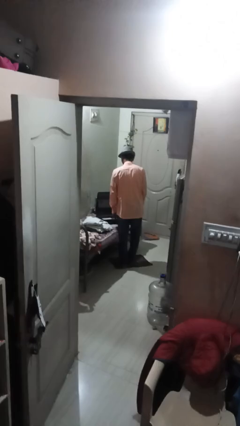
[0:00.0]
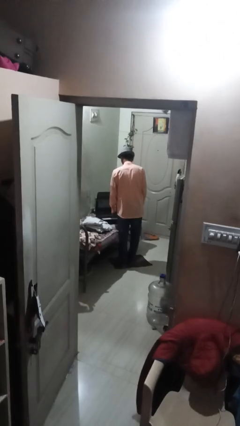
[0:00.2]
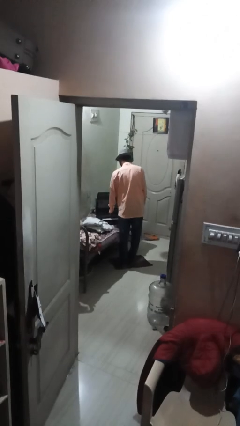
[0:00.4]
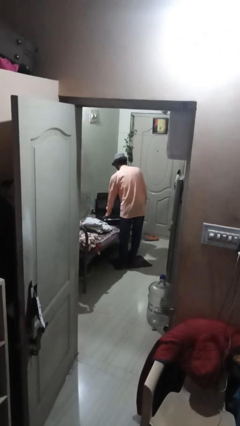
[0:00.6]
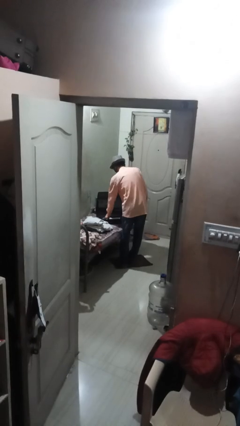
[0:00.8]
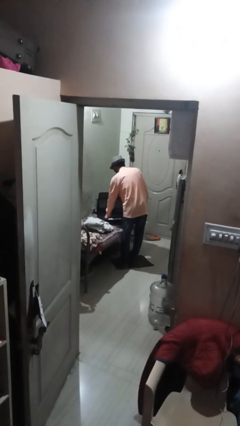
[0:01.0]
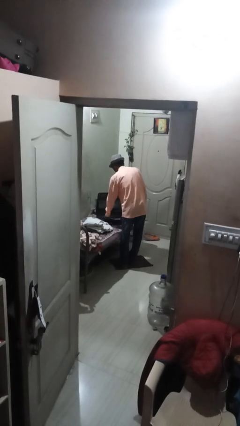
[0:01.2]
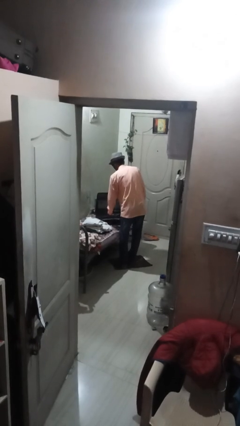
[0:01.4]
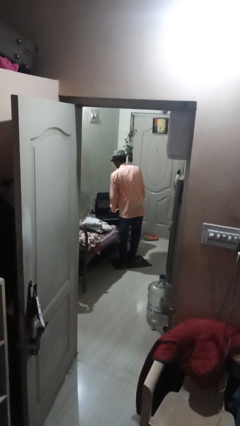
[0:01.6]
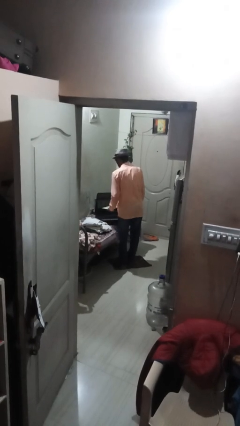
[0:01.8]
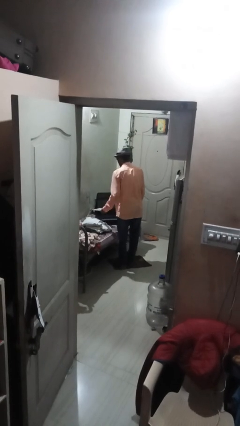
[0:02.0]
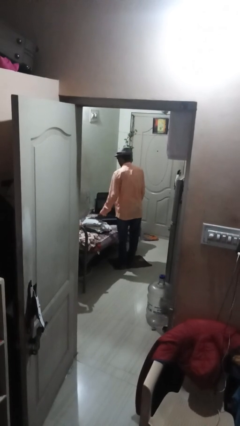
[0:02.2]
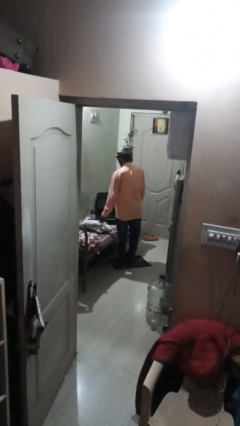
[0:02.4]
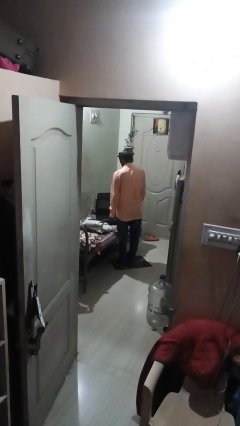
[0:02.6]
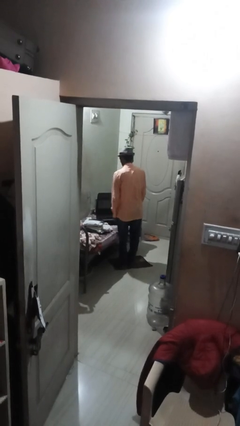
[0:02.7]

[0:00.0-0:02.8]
person unloads clothes from suitcase

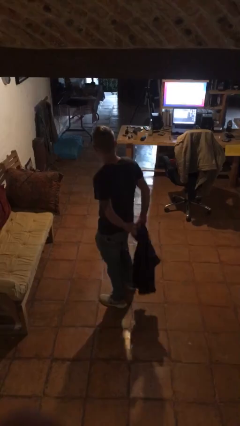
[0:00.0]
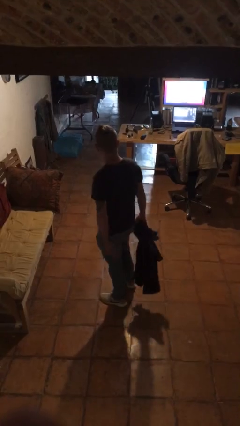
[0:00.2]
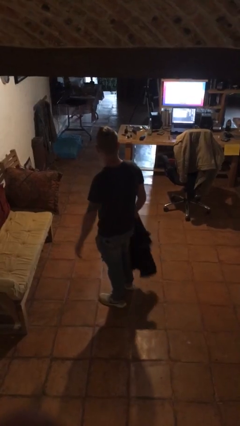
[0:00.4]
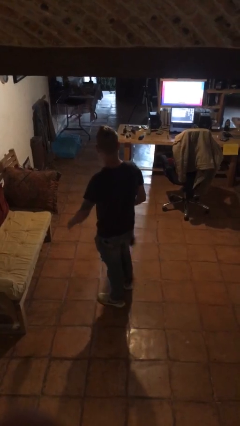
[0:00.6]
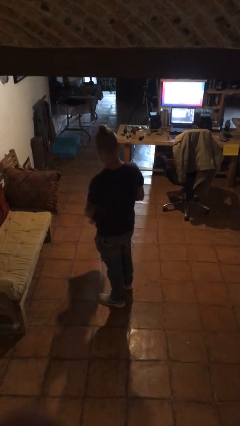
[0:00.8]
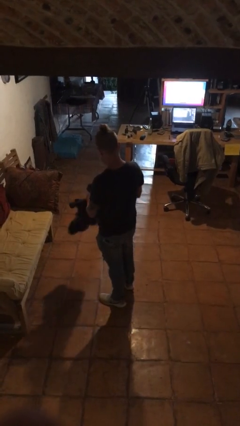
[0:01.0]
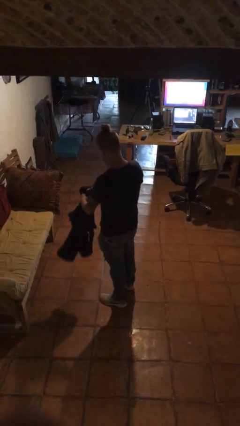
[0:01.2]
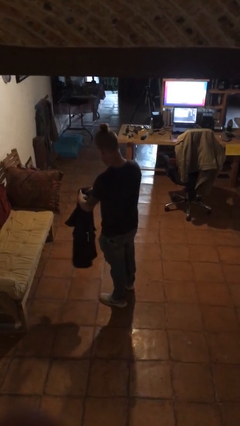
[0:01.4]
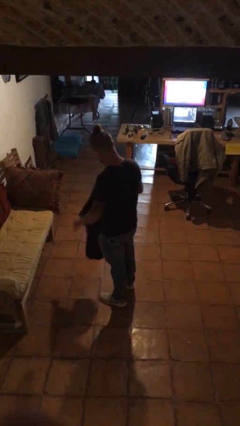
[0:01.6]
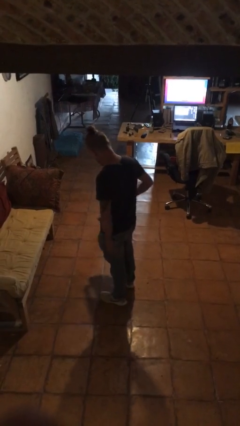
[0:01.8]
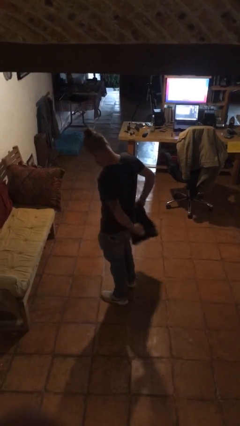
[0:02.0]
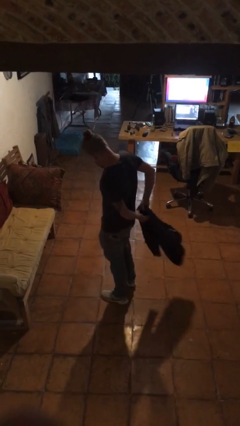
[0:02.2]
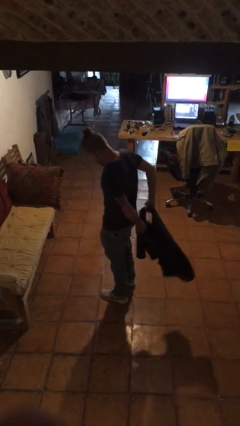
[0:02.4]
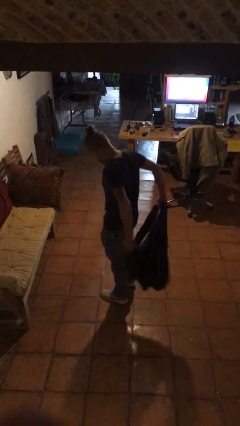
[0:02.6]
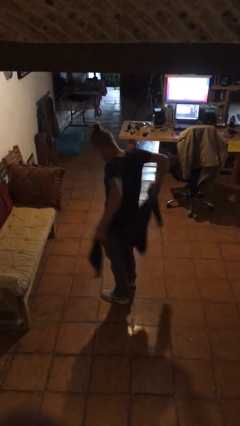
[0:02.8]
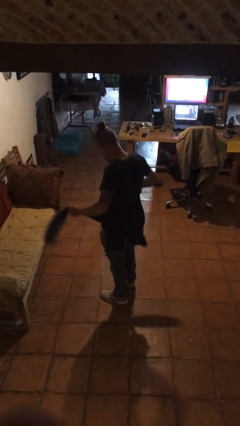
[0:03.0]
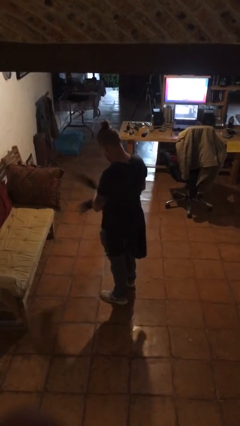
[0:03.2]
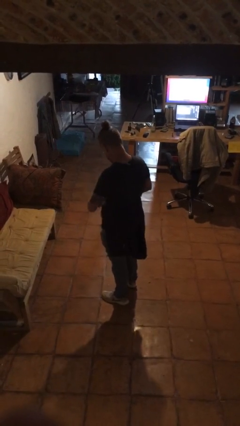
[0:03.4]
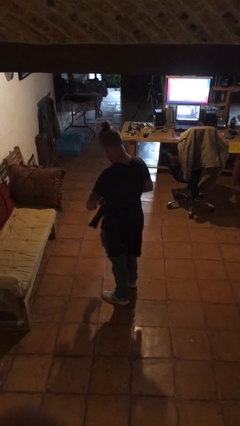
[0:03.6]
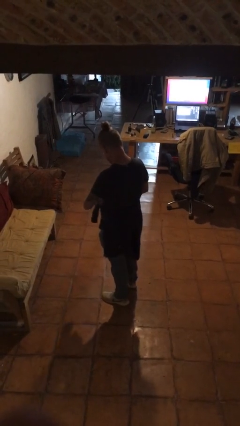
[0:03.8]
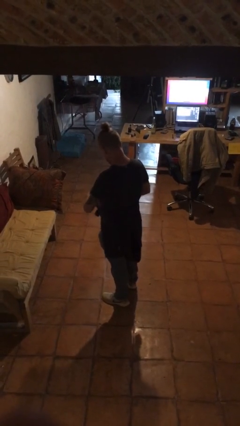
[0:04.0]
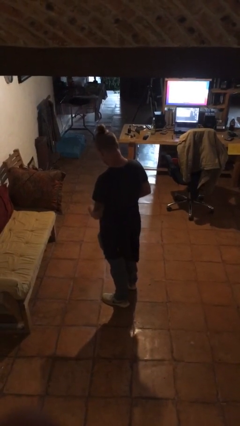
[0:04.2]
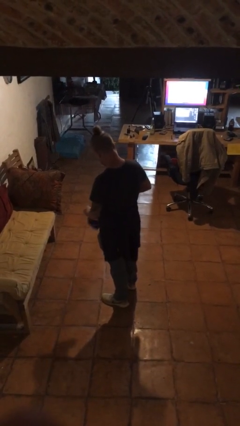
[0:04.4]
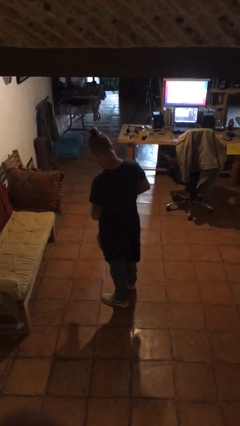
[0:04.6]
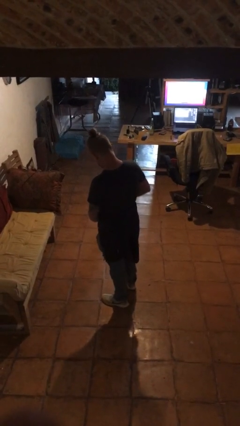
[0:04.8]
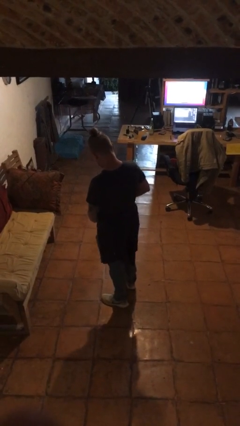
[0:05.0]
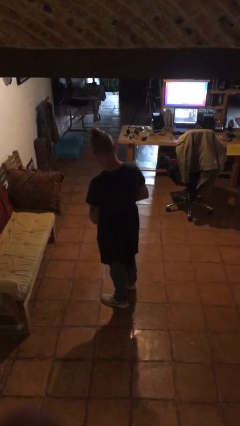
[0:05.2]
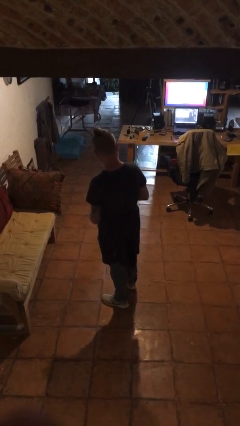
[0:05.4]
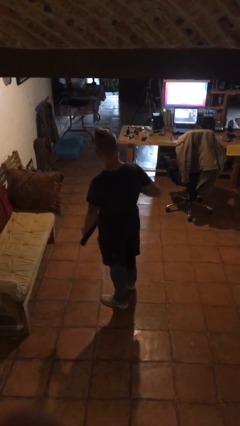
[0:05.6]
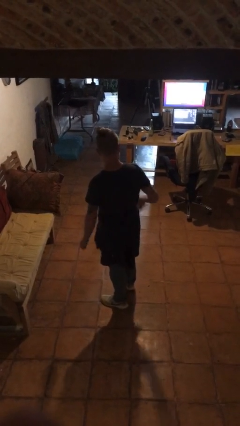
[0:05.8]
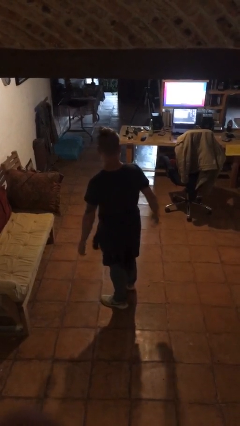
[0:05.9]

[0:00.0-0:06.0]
person ties jacket around waist

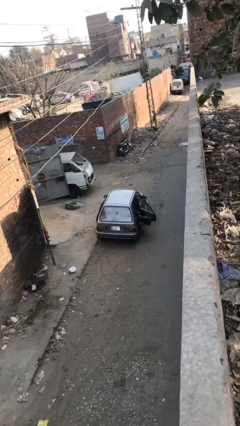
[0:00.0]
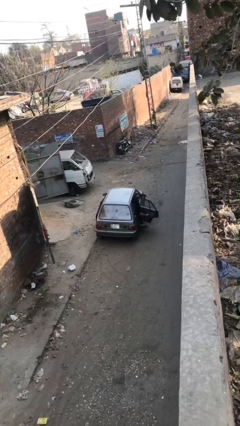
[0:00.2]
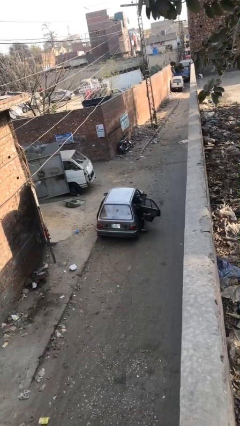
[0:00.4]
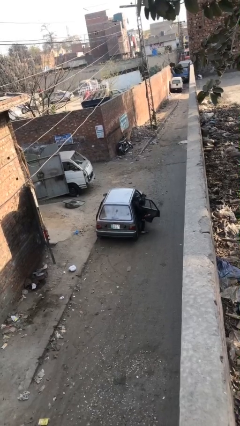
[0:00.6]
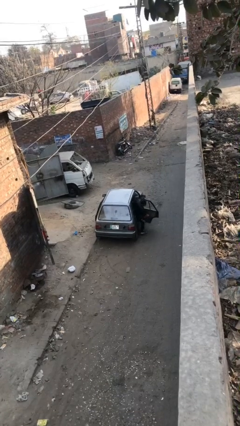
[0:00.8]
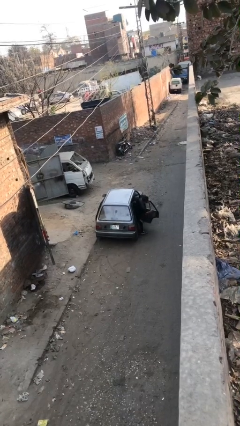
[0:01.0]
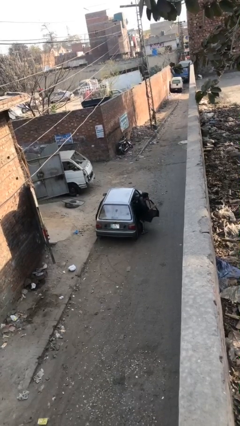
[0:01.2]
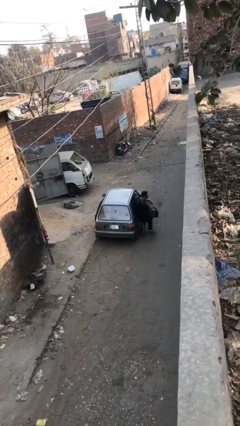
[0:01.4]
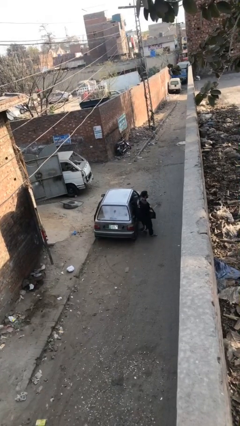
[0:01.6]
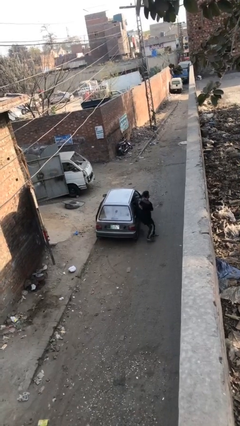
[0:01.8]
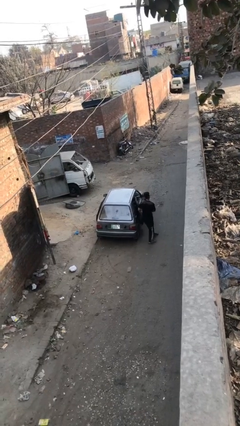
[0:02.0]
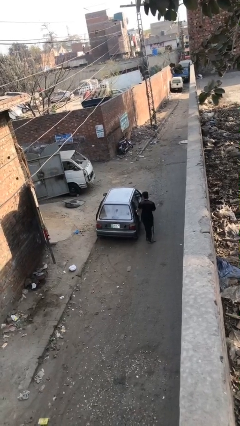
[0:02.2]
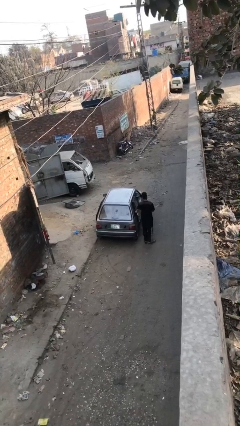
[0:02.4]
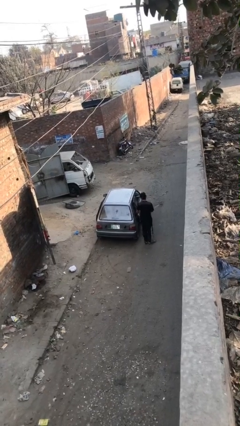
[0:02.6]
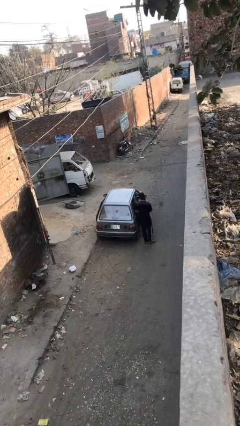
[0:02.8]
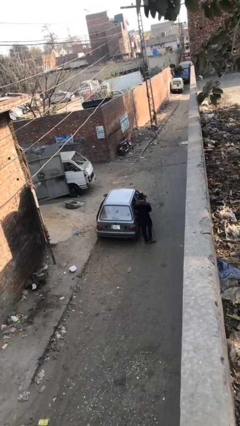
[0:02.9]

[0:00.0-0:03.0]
car drops off person

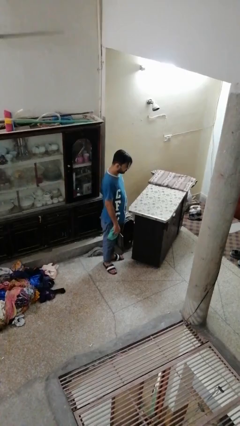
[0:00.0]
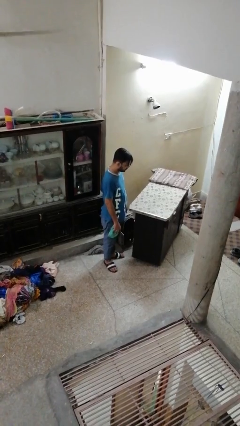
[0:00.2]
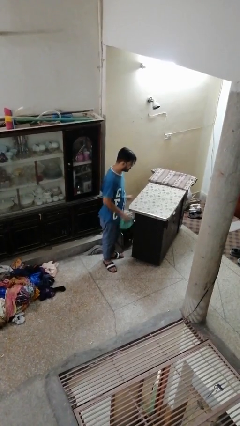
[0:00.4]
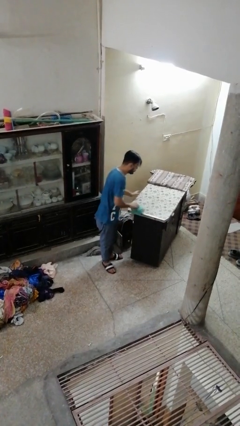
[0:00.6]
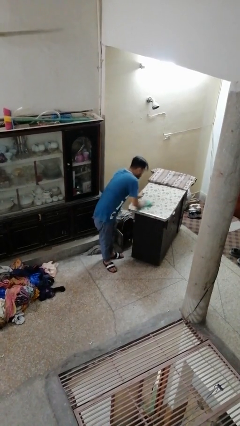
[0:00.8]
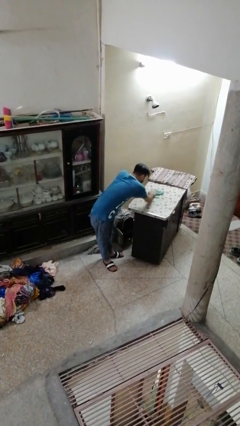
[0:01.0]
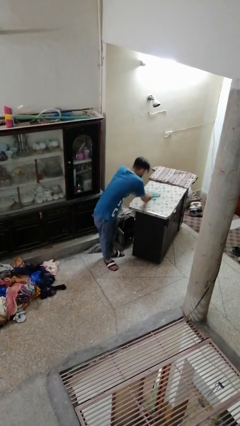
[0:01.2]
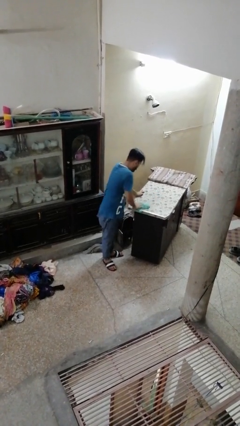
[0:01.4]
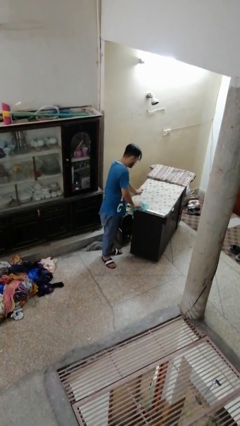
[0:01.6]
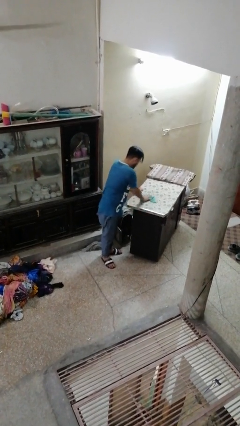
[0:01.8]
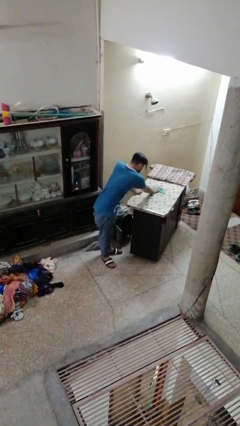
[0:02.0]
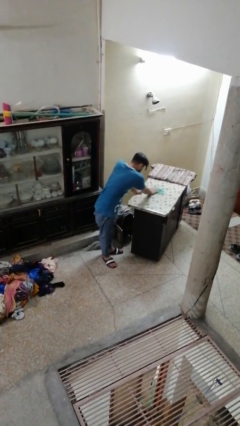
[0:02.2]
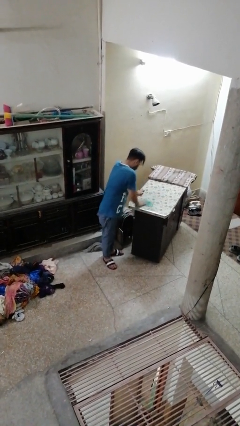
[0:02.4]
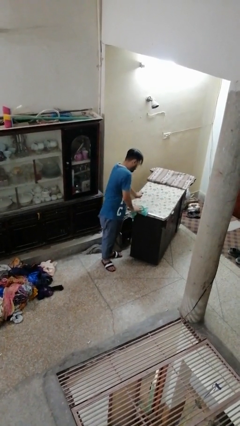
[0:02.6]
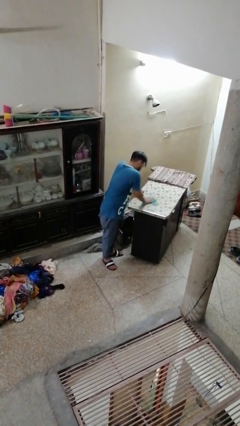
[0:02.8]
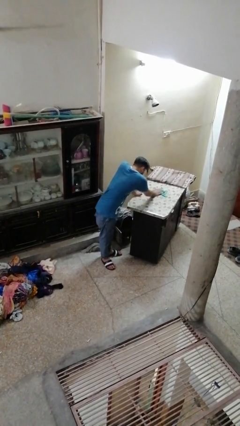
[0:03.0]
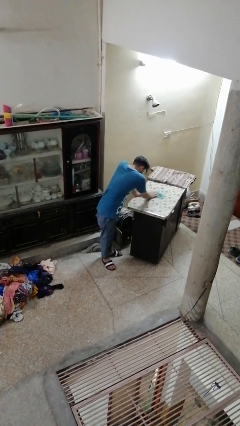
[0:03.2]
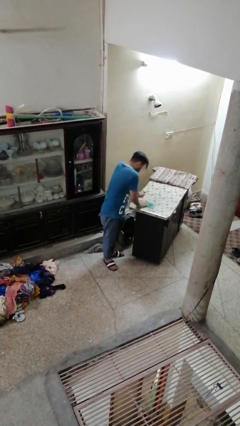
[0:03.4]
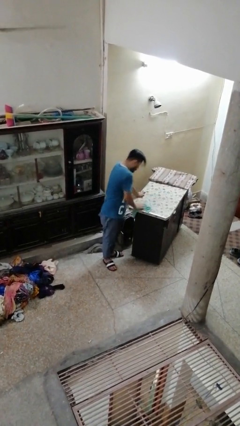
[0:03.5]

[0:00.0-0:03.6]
person cleans table with rag

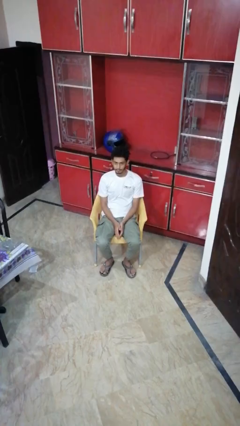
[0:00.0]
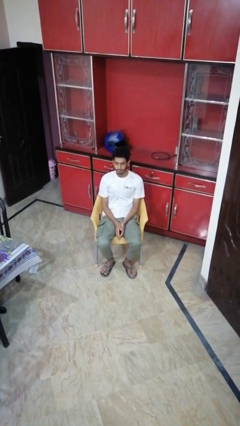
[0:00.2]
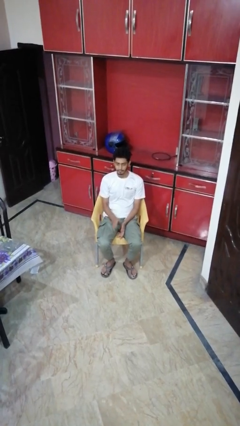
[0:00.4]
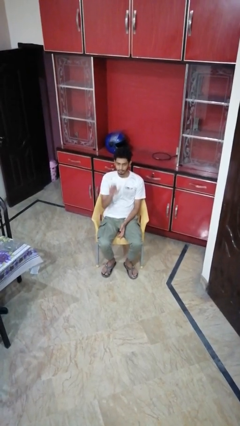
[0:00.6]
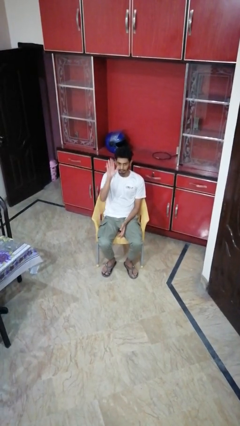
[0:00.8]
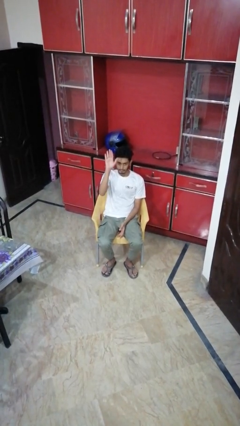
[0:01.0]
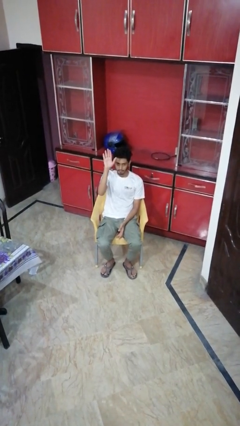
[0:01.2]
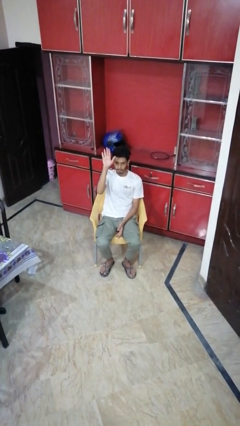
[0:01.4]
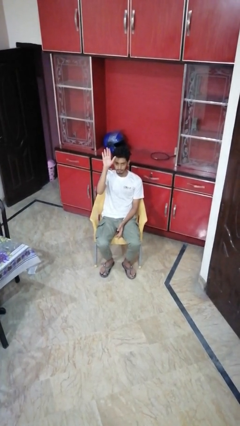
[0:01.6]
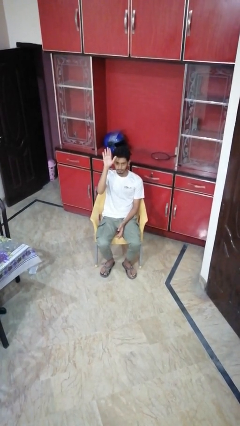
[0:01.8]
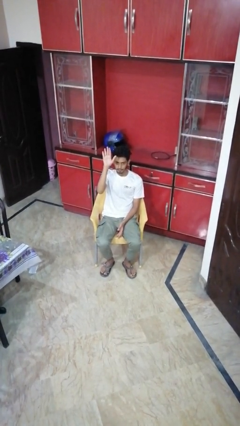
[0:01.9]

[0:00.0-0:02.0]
person gestures raise hand
